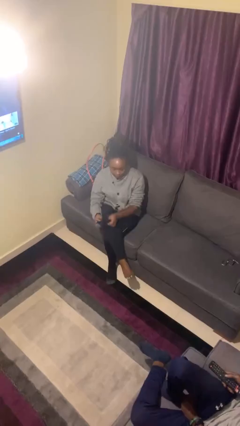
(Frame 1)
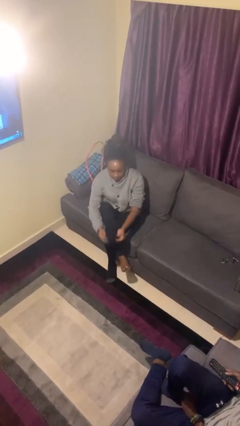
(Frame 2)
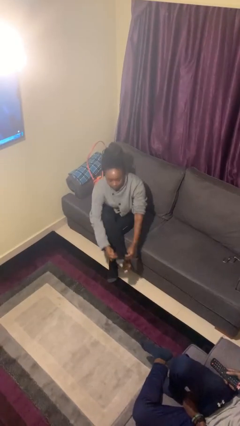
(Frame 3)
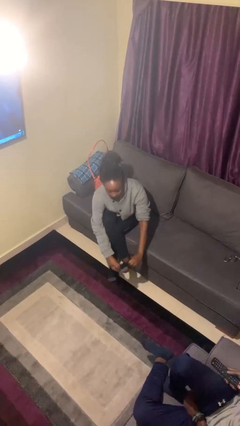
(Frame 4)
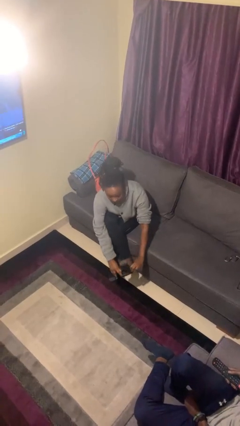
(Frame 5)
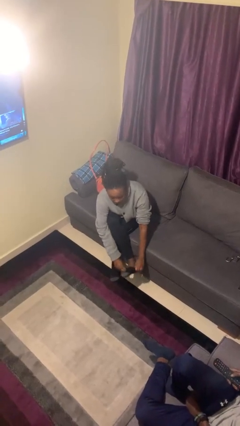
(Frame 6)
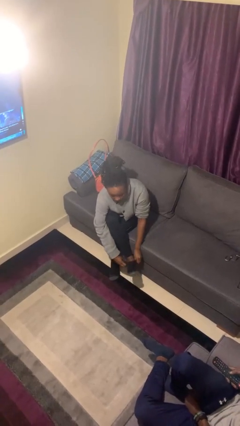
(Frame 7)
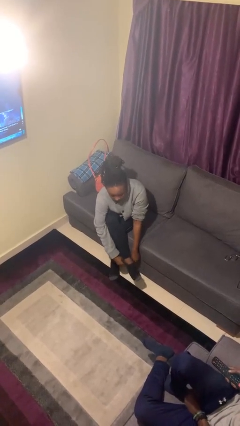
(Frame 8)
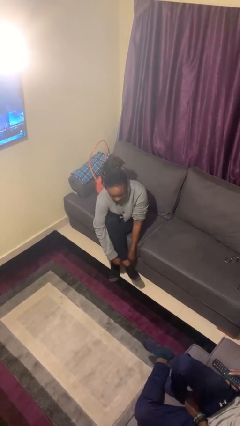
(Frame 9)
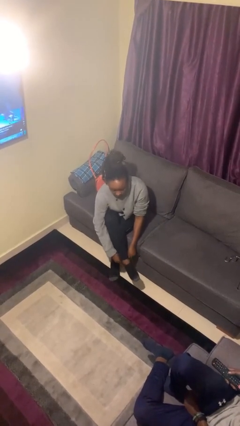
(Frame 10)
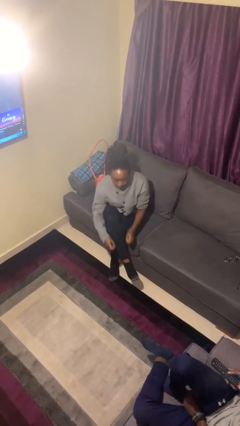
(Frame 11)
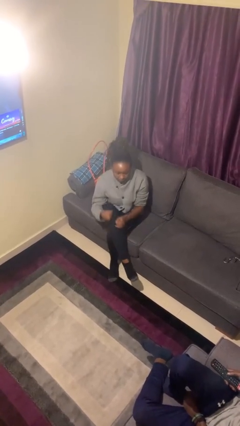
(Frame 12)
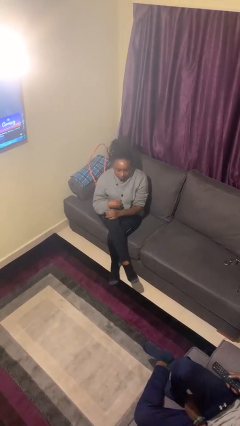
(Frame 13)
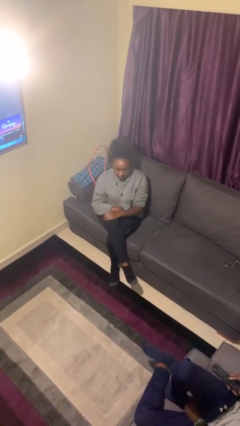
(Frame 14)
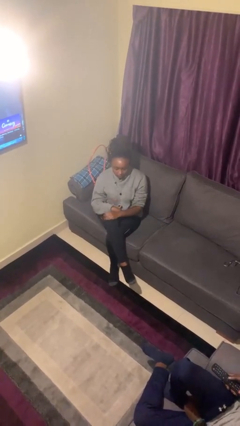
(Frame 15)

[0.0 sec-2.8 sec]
person puts on socks

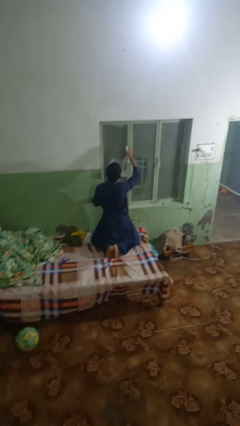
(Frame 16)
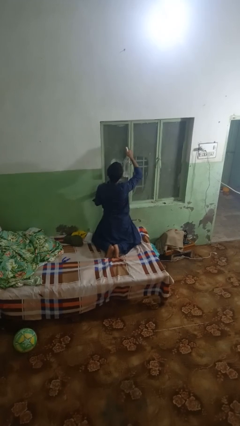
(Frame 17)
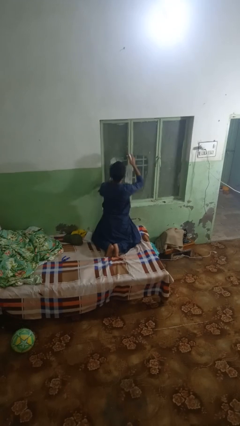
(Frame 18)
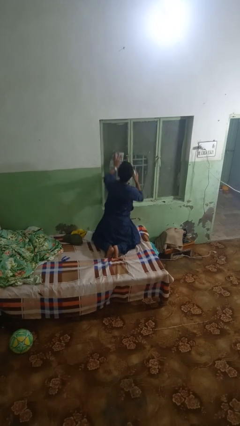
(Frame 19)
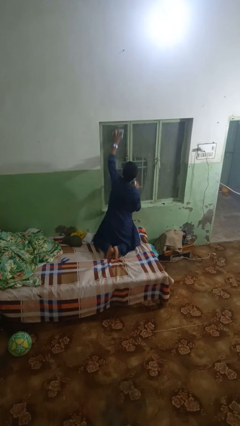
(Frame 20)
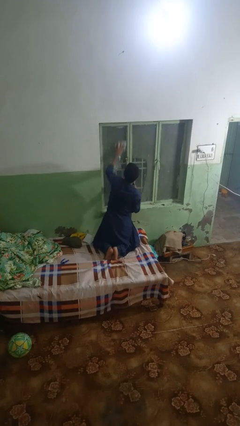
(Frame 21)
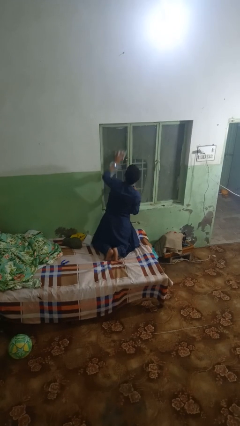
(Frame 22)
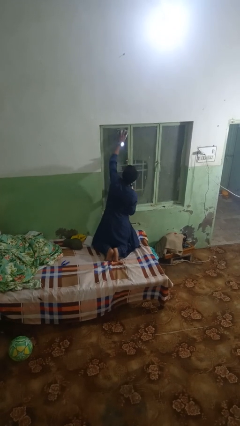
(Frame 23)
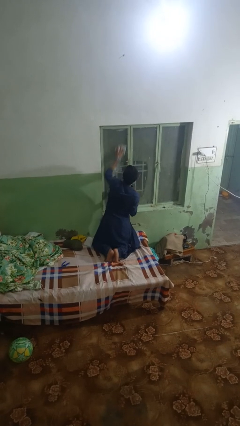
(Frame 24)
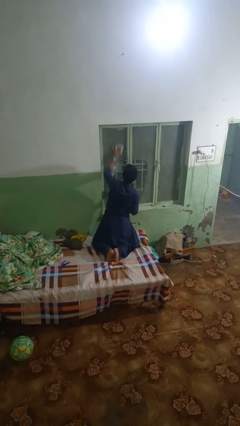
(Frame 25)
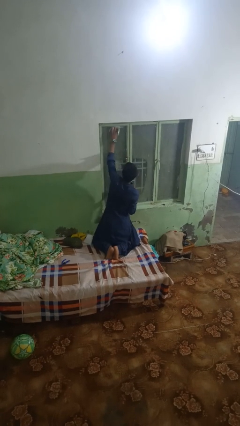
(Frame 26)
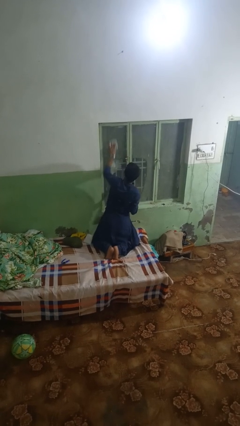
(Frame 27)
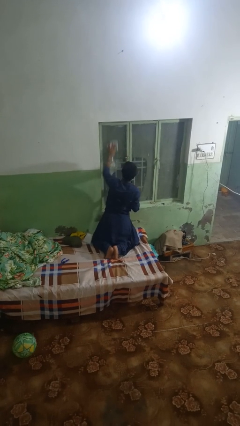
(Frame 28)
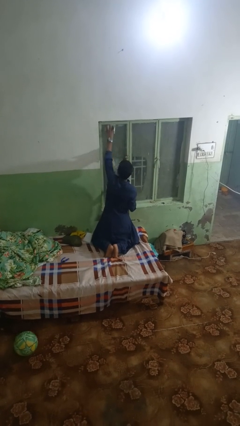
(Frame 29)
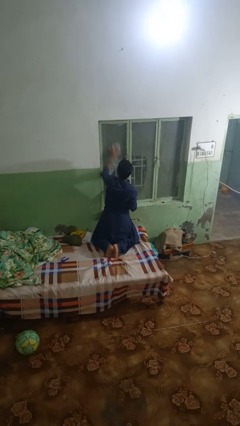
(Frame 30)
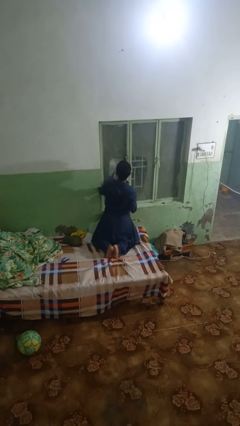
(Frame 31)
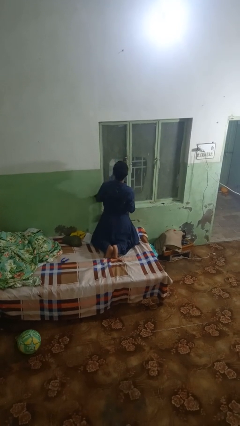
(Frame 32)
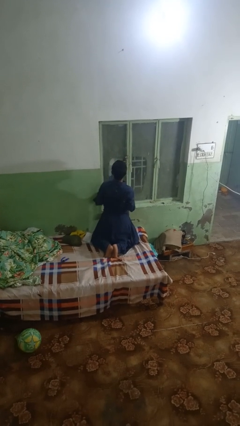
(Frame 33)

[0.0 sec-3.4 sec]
person washes window

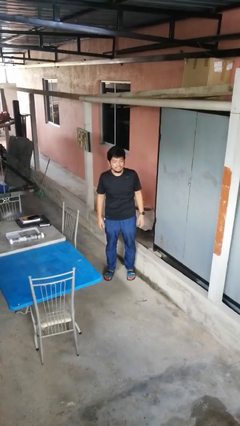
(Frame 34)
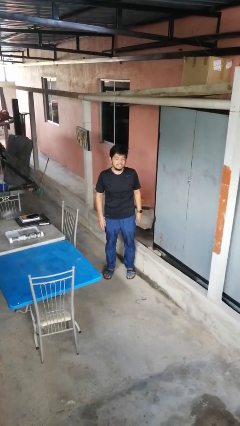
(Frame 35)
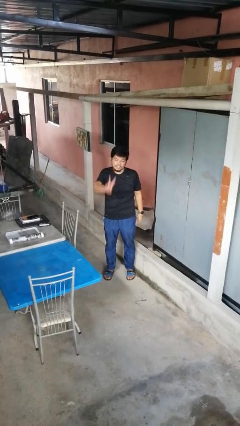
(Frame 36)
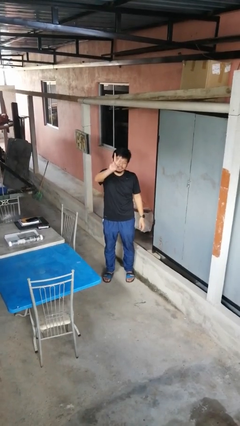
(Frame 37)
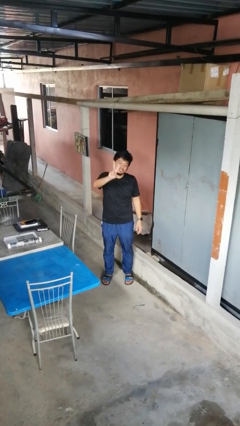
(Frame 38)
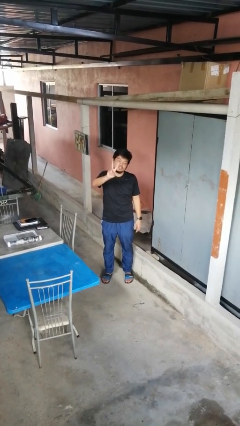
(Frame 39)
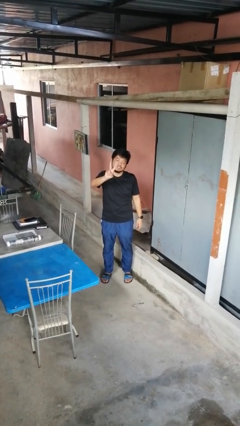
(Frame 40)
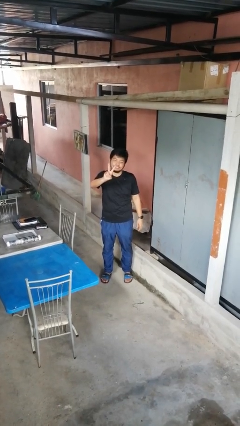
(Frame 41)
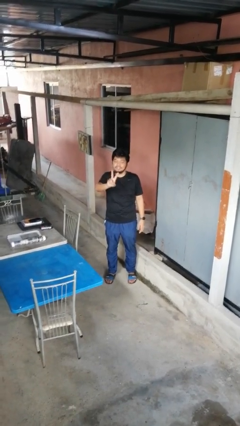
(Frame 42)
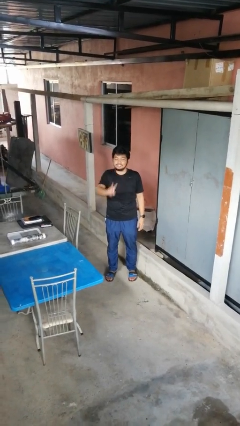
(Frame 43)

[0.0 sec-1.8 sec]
person gestures peace

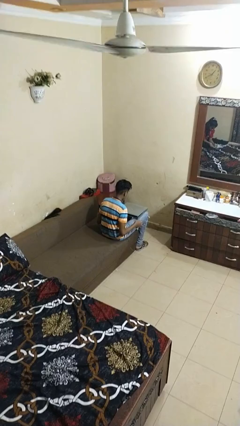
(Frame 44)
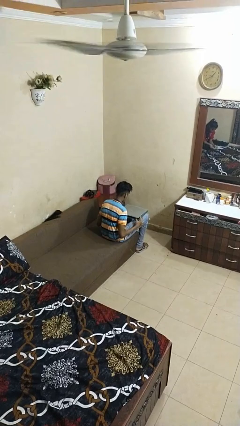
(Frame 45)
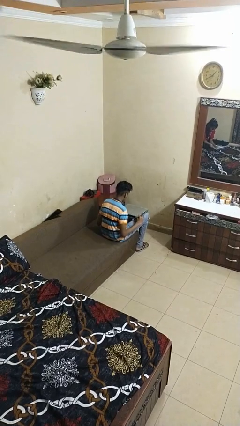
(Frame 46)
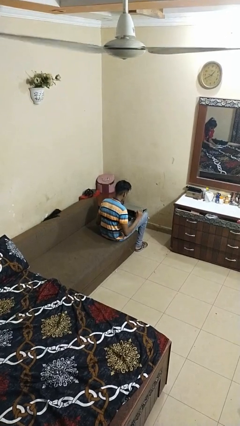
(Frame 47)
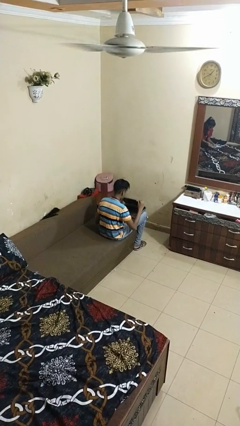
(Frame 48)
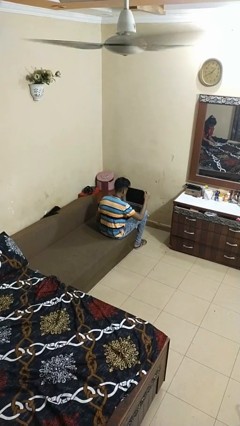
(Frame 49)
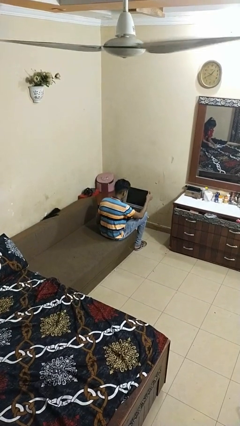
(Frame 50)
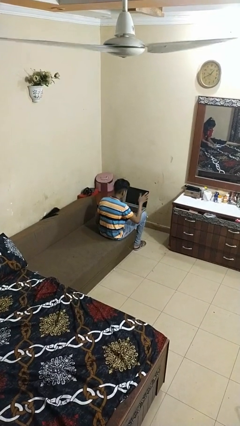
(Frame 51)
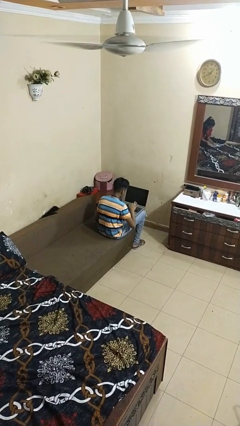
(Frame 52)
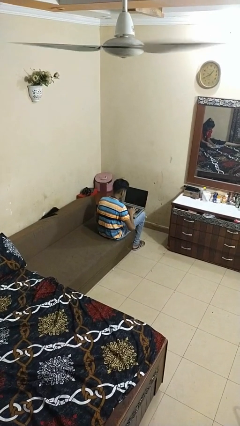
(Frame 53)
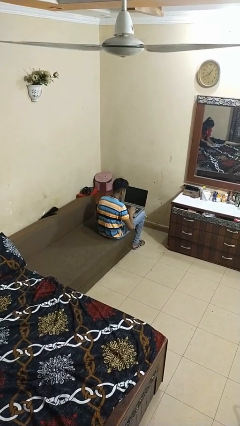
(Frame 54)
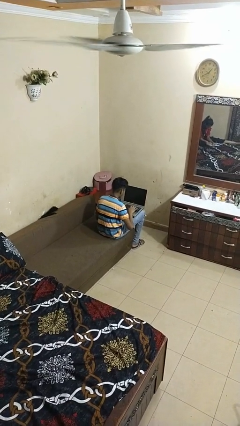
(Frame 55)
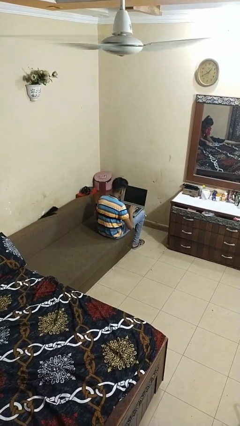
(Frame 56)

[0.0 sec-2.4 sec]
person opens laptop

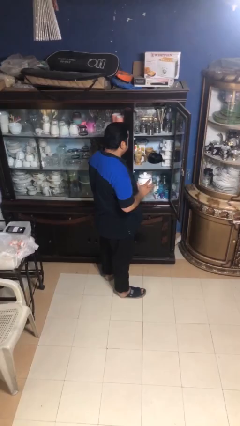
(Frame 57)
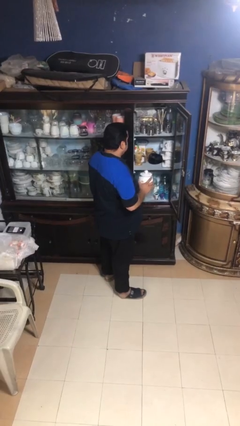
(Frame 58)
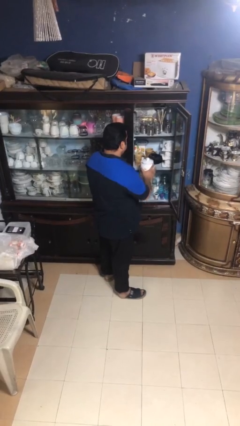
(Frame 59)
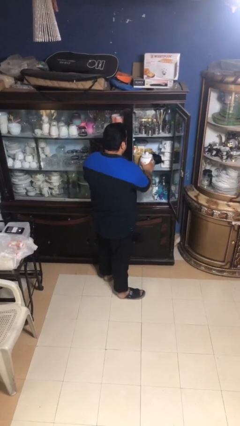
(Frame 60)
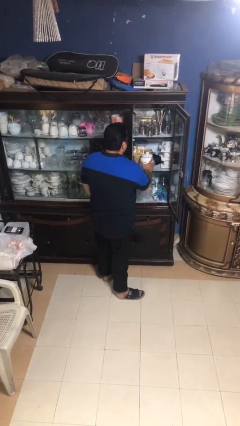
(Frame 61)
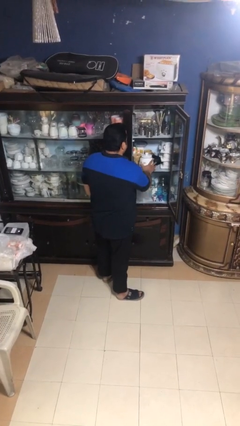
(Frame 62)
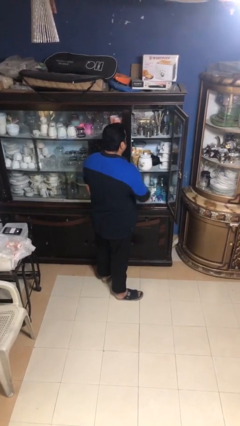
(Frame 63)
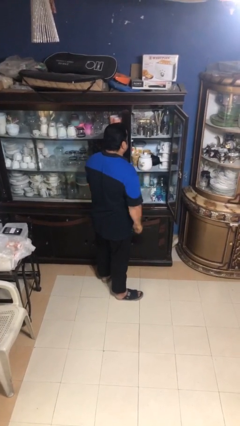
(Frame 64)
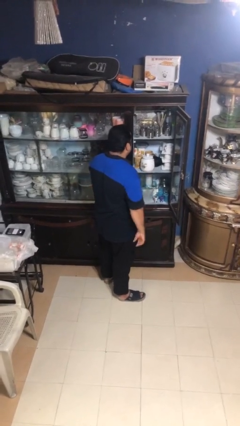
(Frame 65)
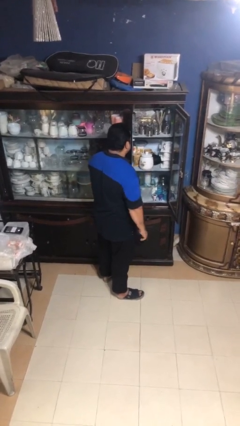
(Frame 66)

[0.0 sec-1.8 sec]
person puts down object into cabinet

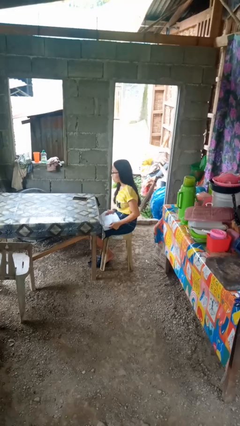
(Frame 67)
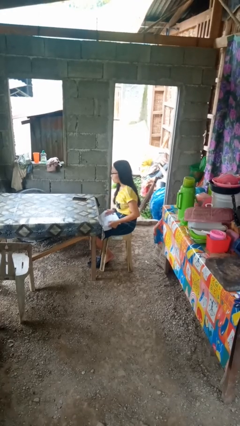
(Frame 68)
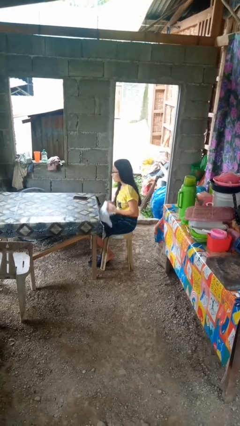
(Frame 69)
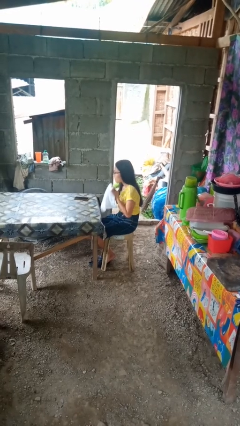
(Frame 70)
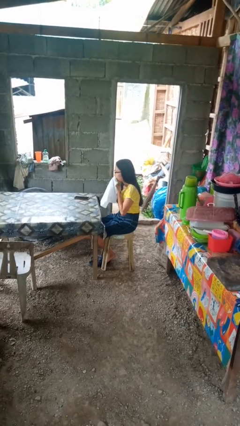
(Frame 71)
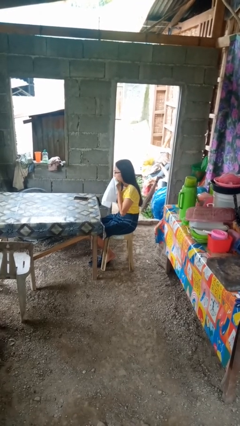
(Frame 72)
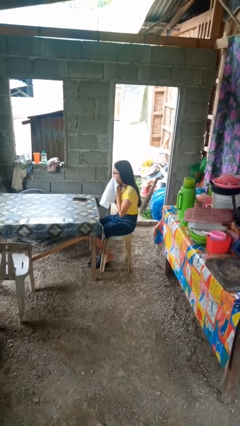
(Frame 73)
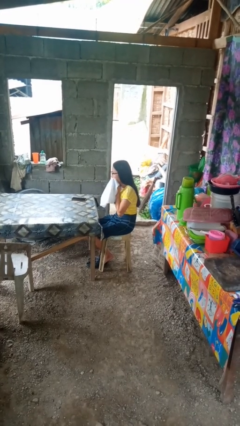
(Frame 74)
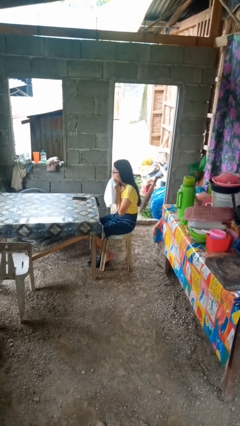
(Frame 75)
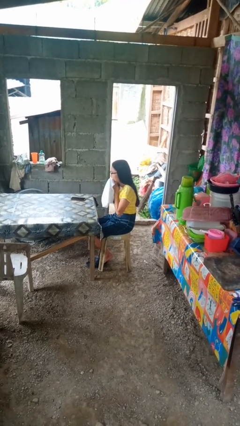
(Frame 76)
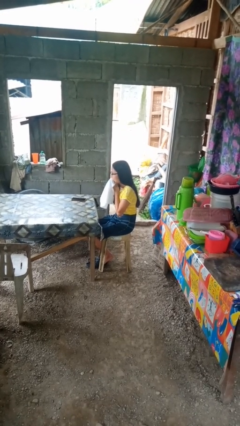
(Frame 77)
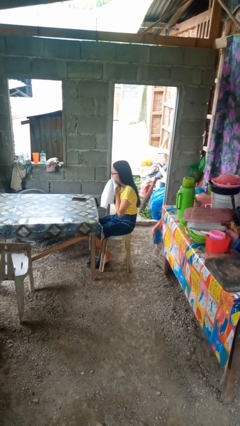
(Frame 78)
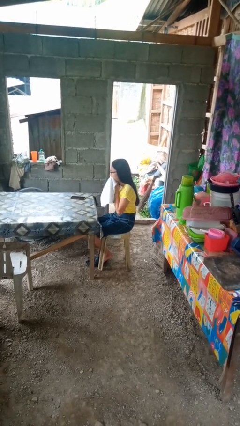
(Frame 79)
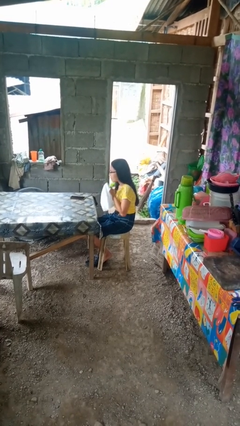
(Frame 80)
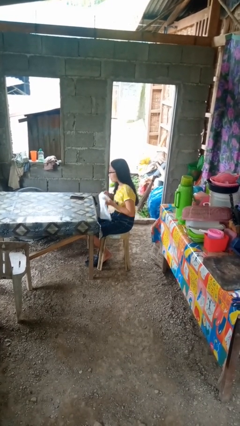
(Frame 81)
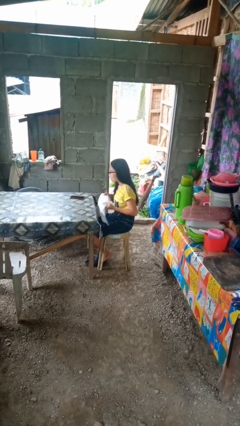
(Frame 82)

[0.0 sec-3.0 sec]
person wipes mouth with napkin

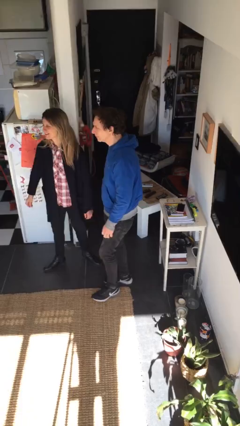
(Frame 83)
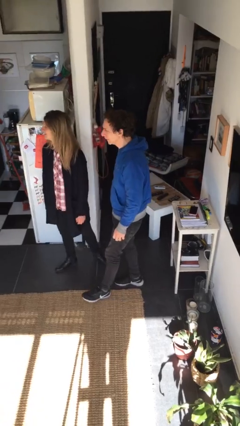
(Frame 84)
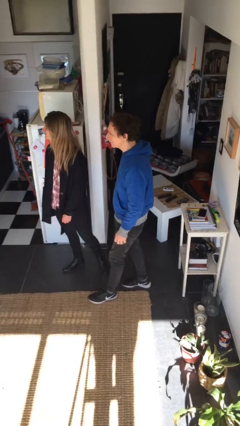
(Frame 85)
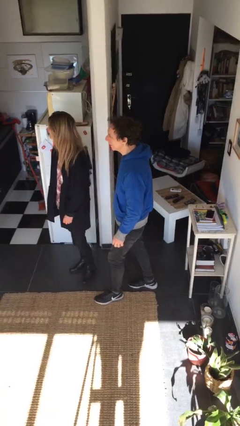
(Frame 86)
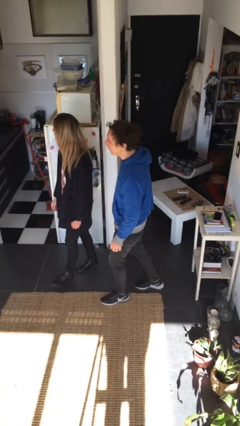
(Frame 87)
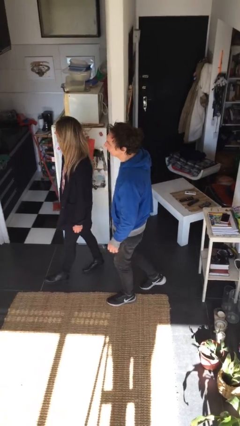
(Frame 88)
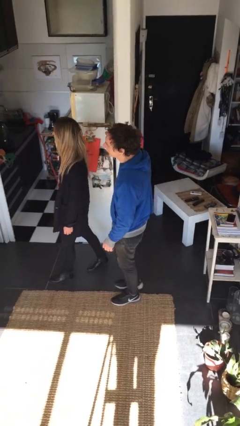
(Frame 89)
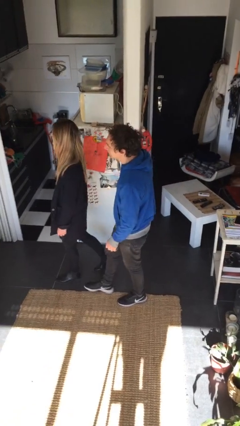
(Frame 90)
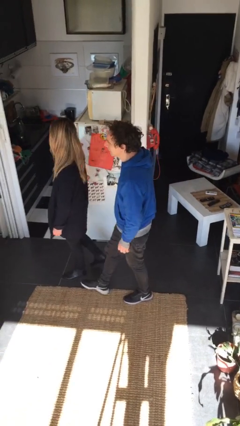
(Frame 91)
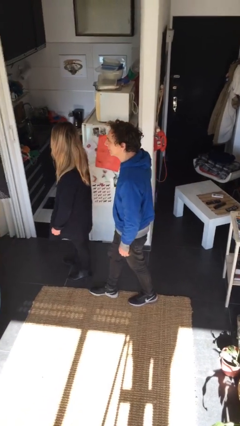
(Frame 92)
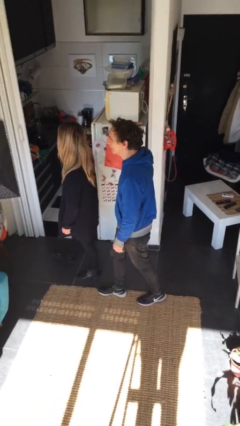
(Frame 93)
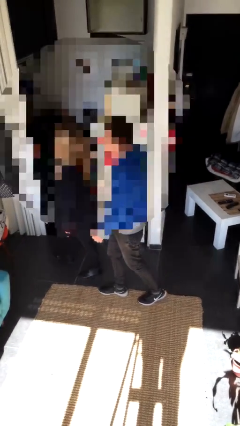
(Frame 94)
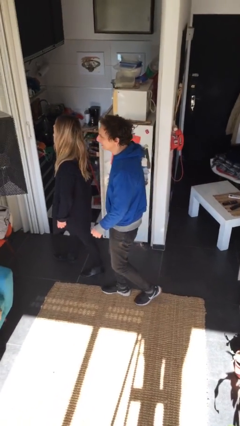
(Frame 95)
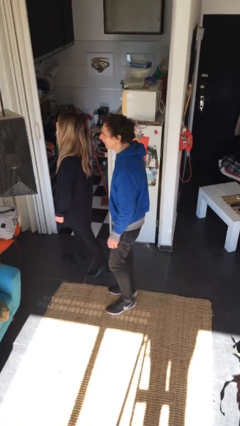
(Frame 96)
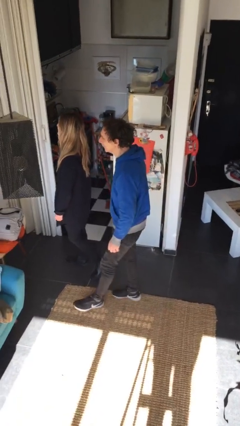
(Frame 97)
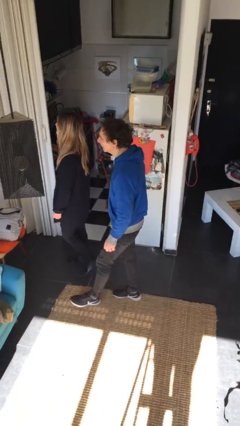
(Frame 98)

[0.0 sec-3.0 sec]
person talks to person
